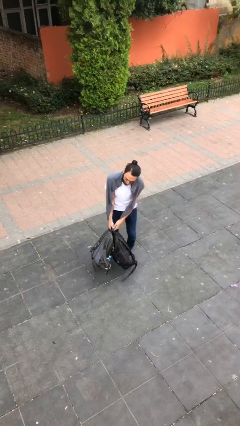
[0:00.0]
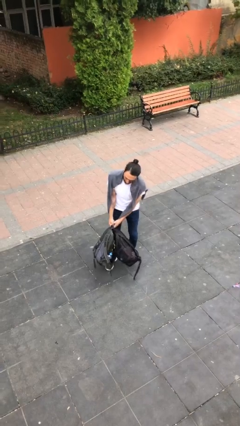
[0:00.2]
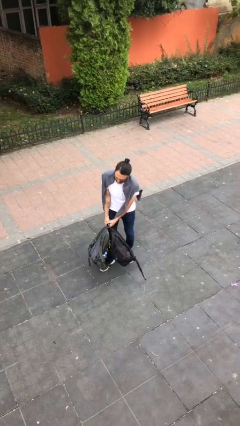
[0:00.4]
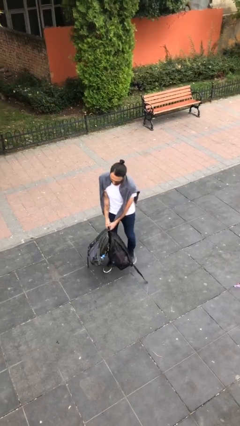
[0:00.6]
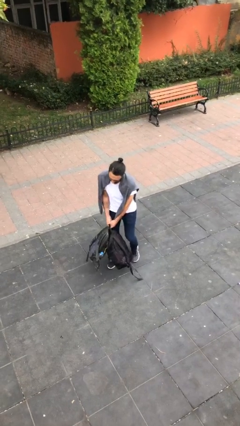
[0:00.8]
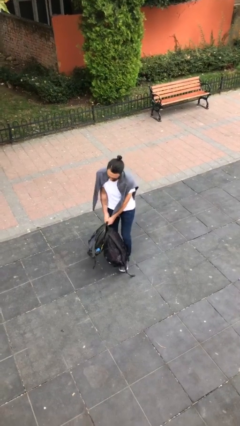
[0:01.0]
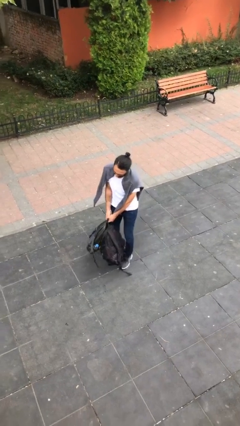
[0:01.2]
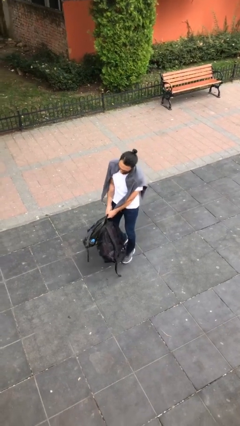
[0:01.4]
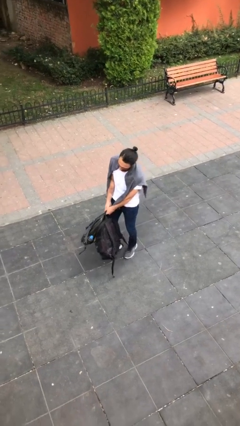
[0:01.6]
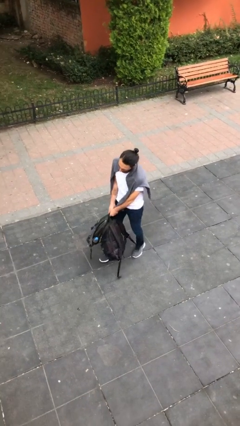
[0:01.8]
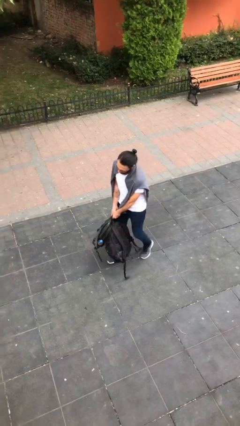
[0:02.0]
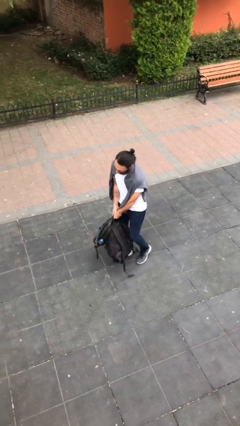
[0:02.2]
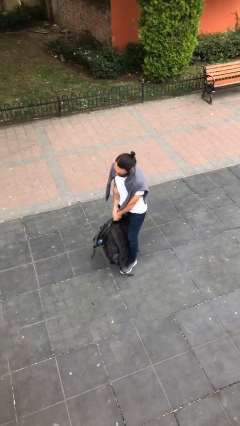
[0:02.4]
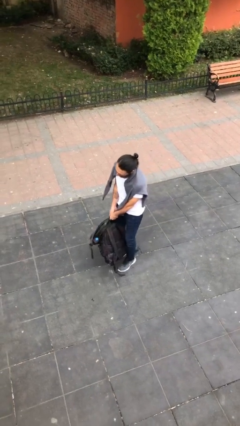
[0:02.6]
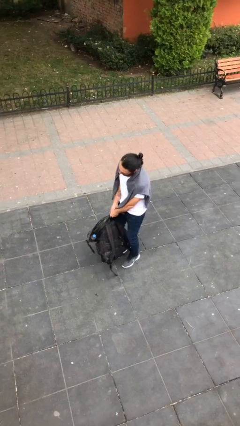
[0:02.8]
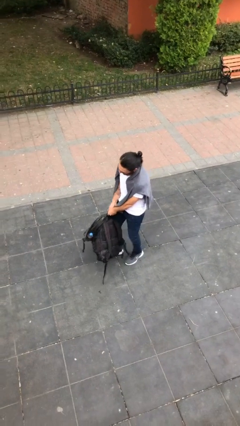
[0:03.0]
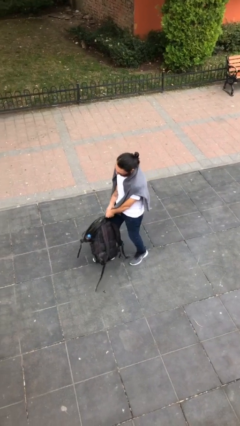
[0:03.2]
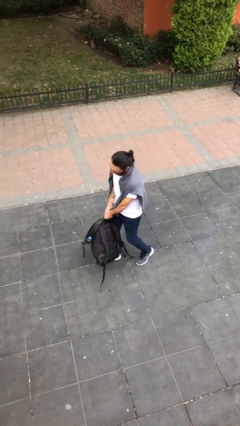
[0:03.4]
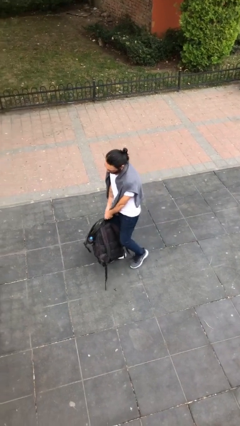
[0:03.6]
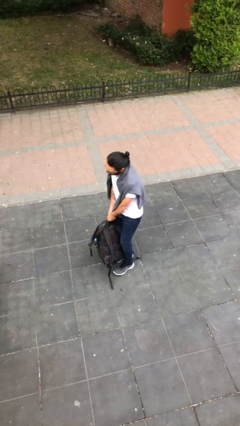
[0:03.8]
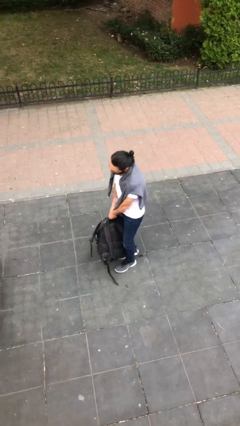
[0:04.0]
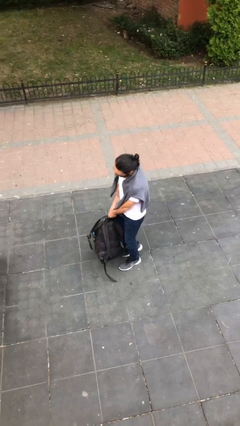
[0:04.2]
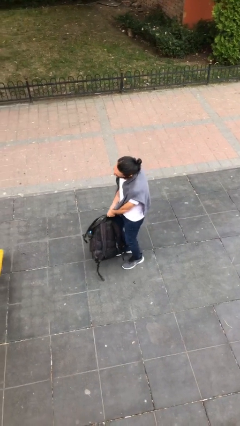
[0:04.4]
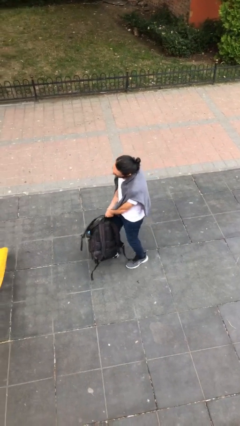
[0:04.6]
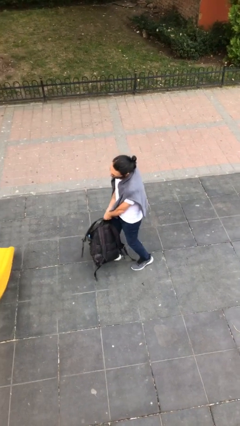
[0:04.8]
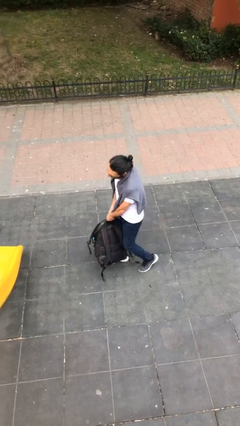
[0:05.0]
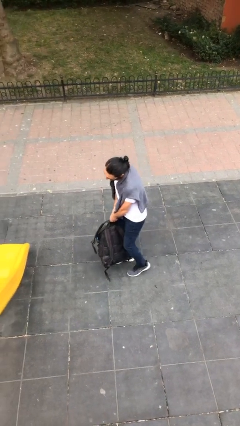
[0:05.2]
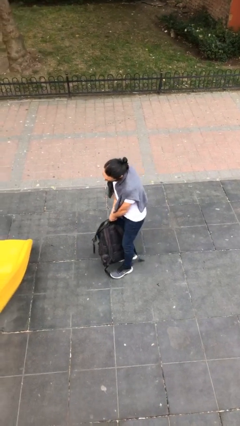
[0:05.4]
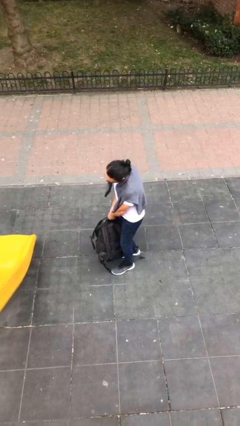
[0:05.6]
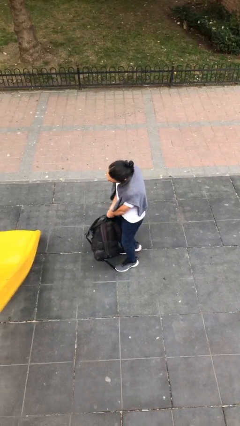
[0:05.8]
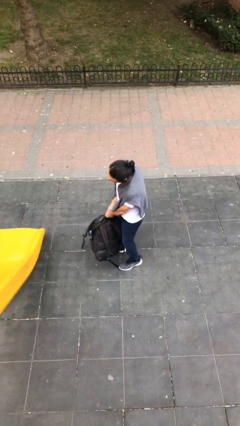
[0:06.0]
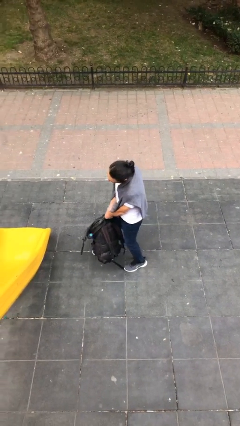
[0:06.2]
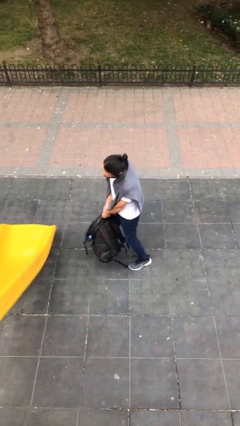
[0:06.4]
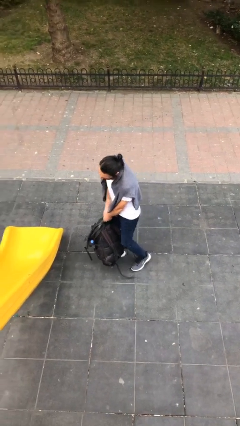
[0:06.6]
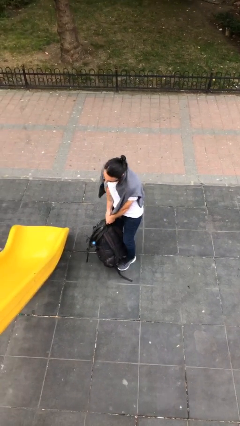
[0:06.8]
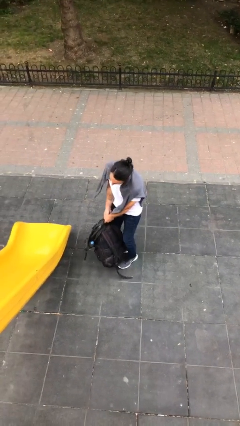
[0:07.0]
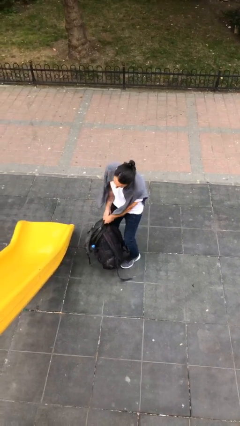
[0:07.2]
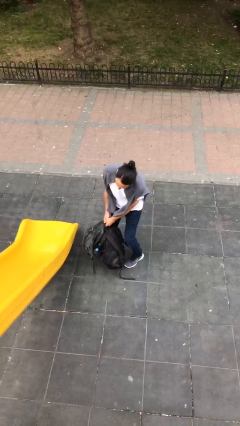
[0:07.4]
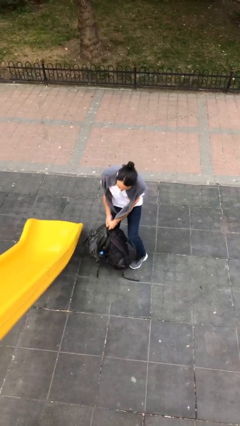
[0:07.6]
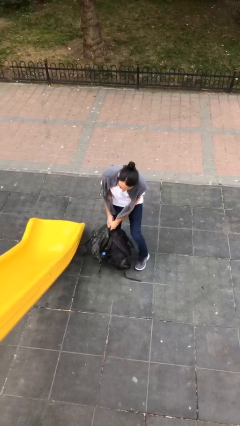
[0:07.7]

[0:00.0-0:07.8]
person carries heavy object

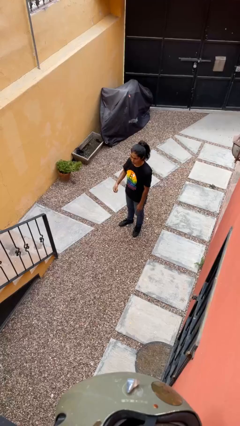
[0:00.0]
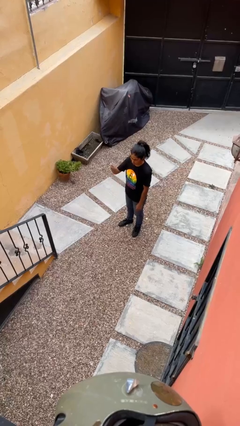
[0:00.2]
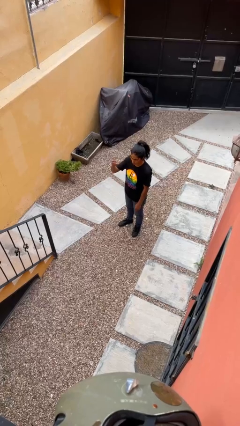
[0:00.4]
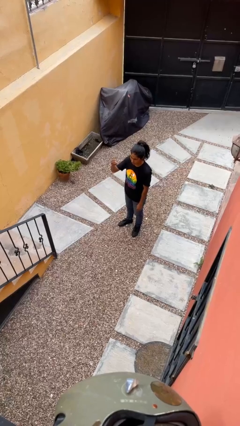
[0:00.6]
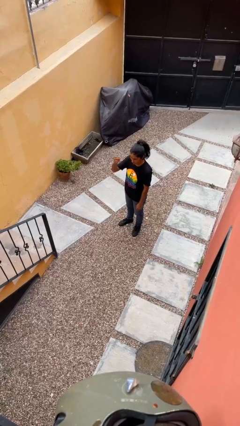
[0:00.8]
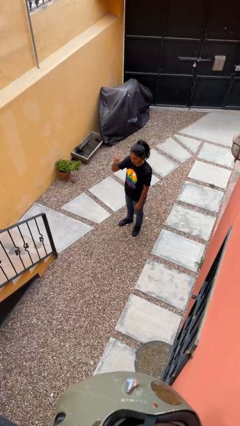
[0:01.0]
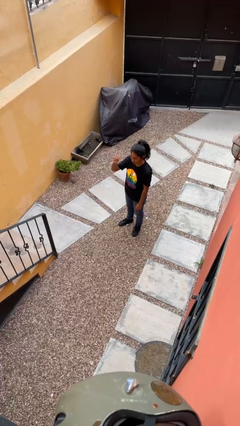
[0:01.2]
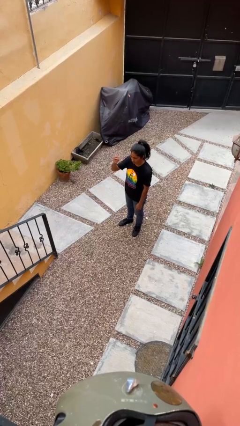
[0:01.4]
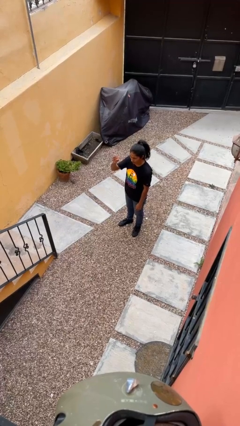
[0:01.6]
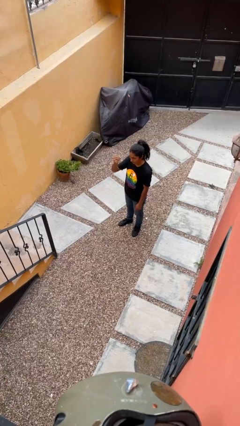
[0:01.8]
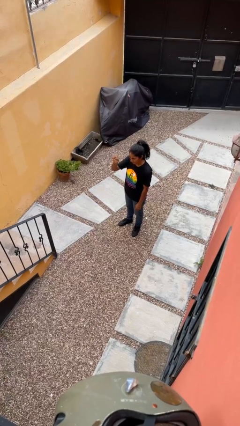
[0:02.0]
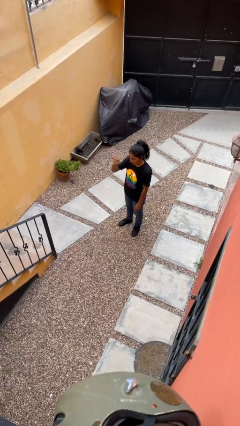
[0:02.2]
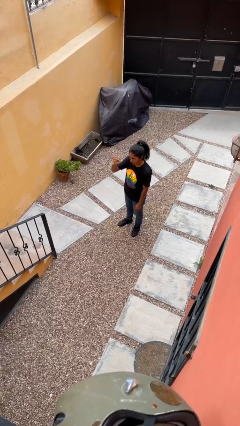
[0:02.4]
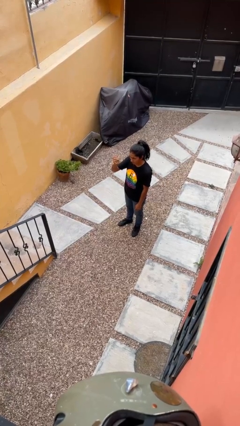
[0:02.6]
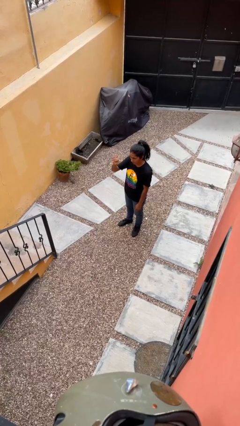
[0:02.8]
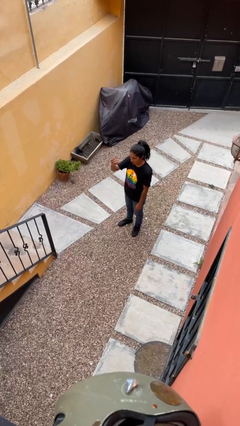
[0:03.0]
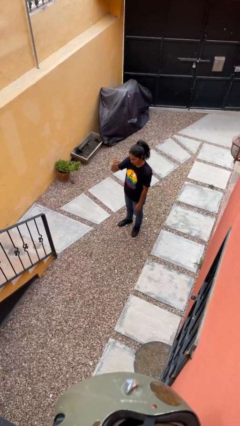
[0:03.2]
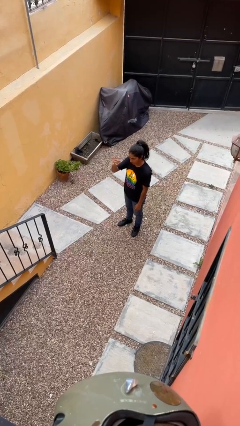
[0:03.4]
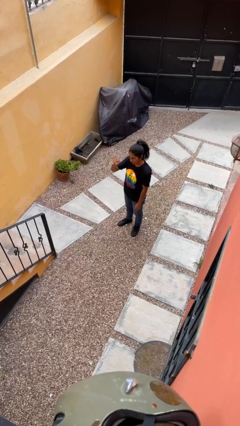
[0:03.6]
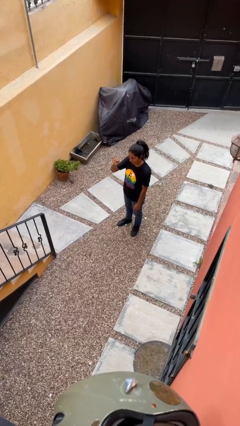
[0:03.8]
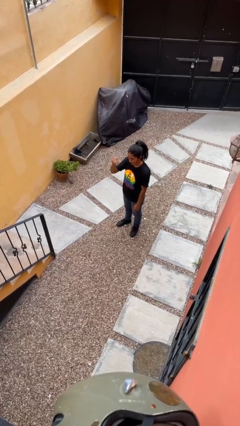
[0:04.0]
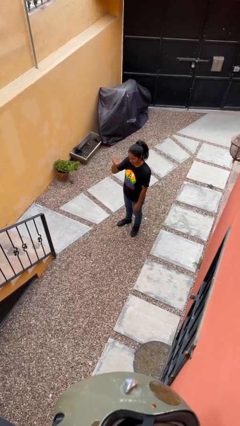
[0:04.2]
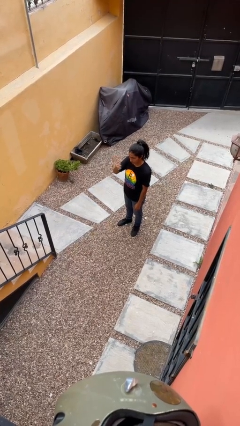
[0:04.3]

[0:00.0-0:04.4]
person gestures come here

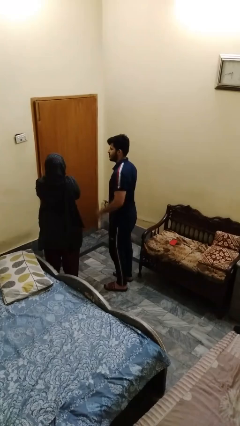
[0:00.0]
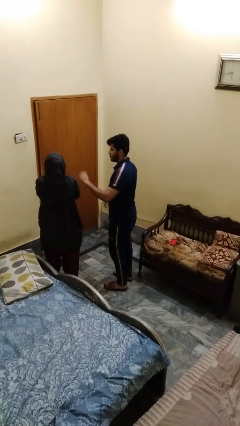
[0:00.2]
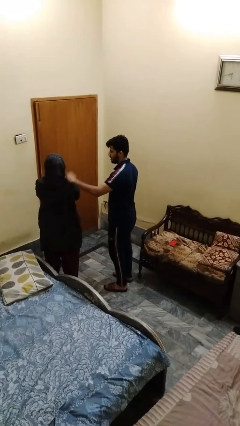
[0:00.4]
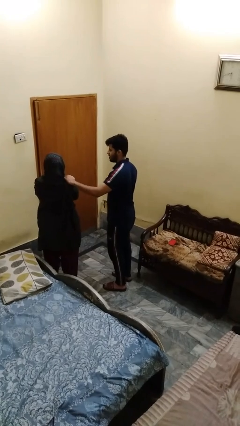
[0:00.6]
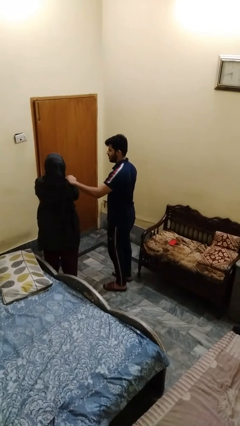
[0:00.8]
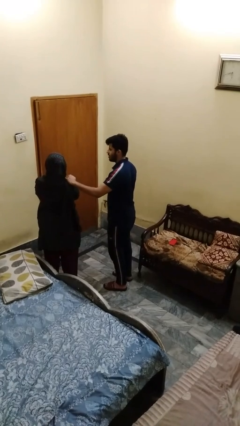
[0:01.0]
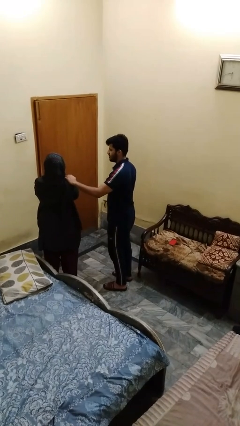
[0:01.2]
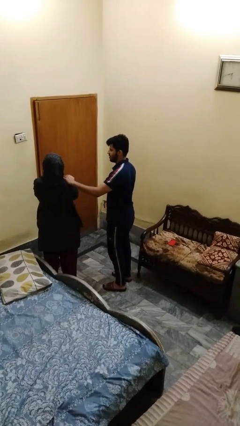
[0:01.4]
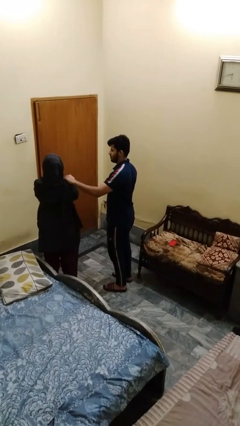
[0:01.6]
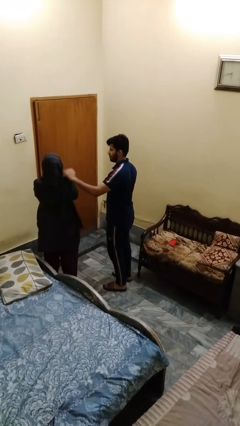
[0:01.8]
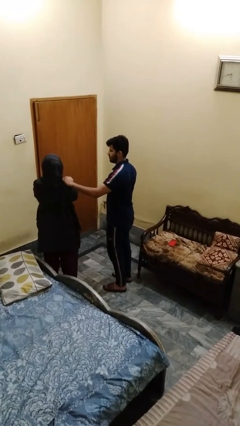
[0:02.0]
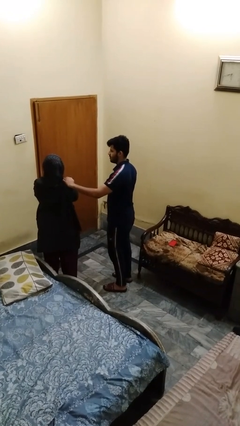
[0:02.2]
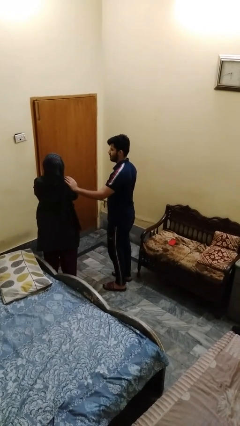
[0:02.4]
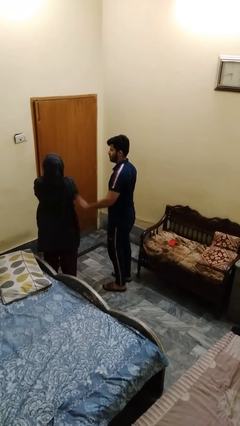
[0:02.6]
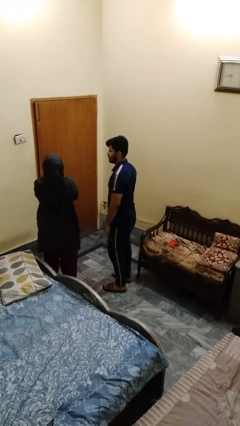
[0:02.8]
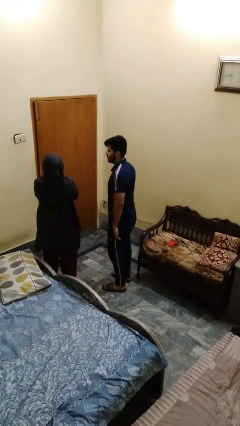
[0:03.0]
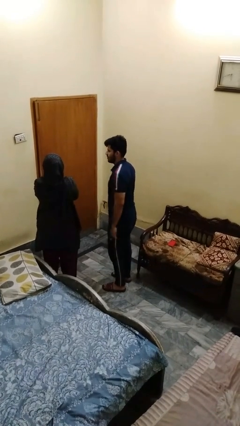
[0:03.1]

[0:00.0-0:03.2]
person pounds shoulders of person

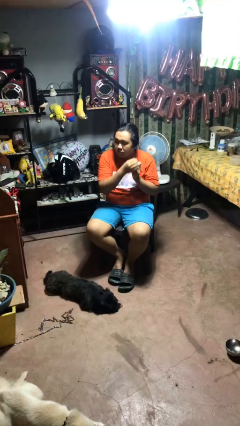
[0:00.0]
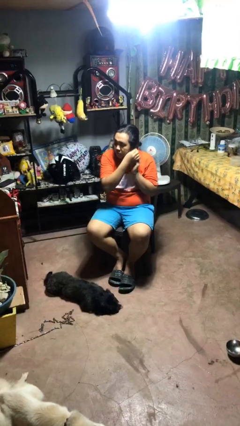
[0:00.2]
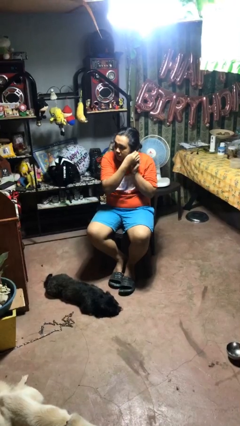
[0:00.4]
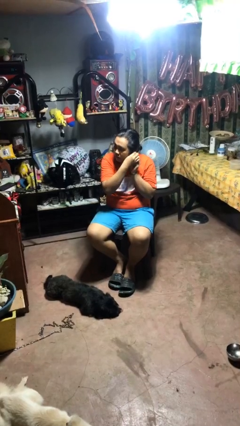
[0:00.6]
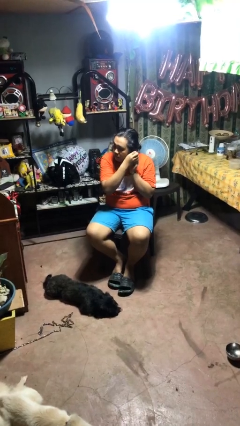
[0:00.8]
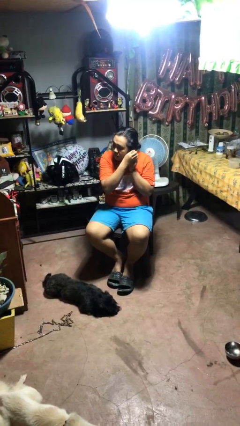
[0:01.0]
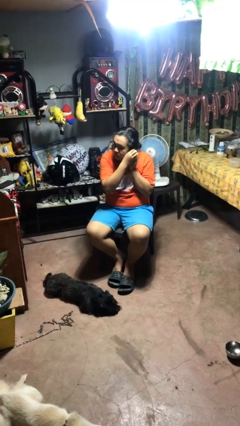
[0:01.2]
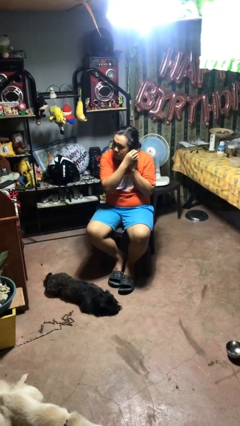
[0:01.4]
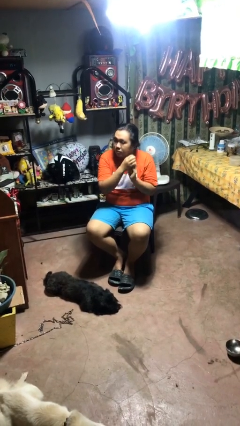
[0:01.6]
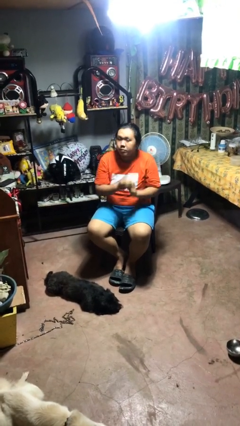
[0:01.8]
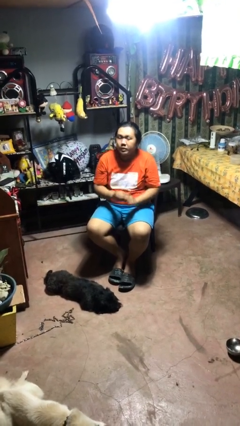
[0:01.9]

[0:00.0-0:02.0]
person takes off earrings

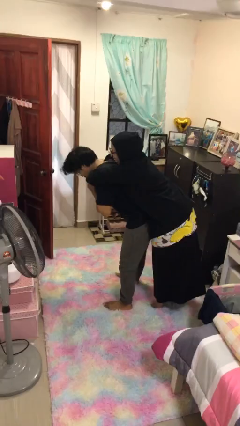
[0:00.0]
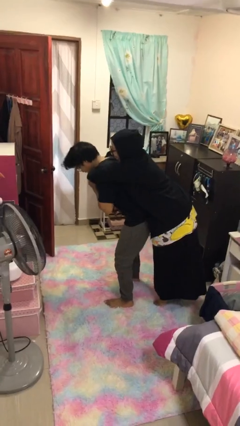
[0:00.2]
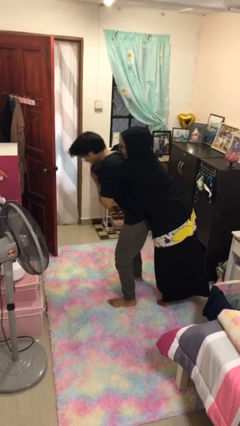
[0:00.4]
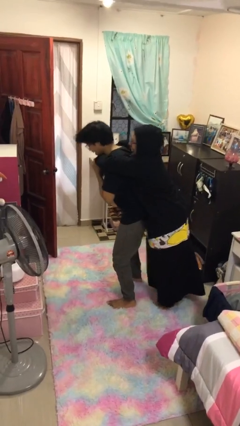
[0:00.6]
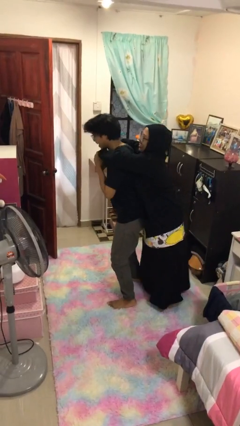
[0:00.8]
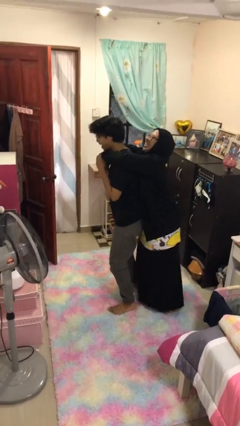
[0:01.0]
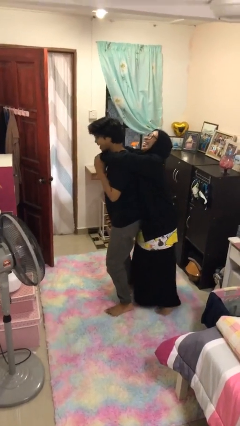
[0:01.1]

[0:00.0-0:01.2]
person puts down person
